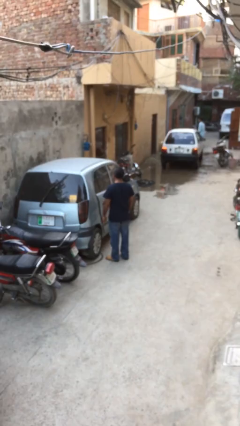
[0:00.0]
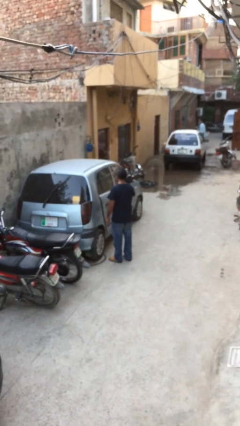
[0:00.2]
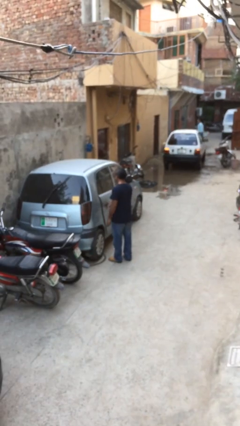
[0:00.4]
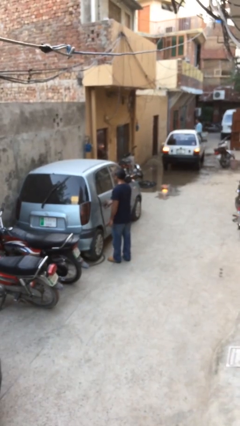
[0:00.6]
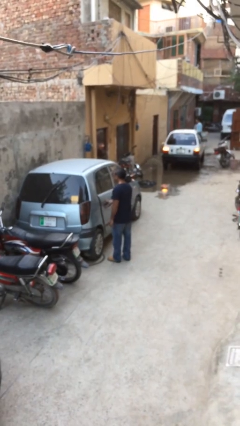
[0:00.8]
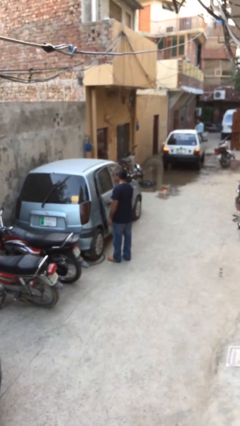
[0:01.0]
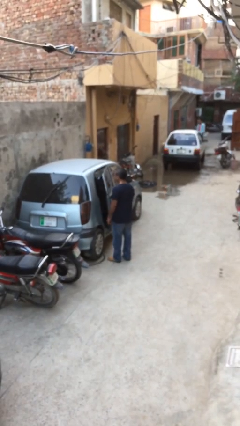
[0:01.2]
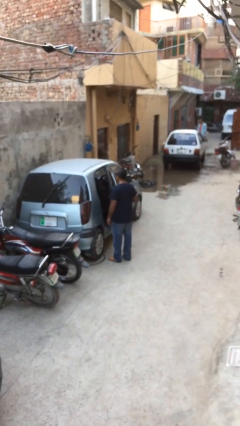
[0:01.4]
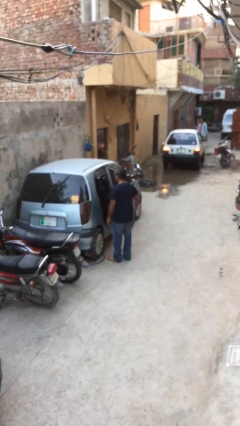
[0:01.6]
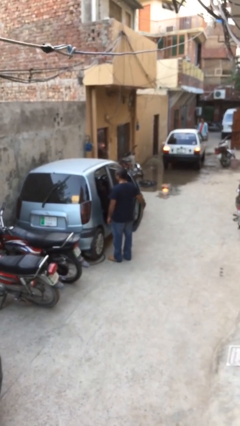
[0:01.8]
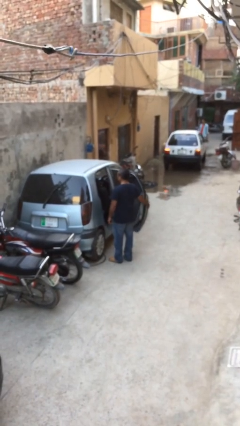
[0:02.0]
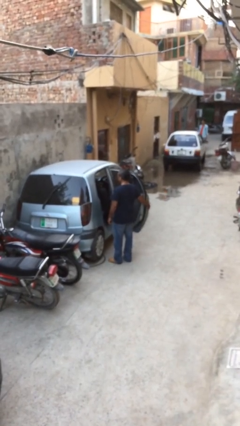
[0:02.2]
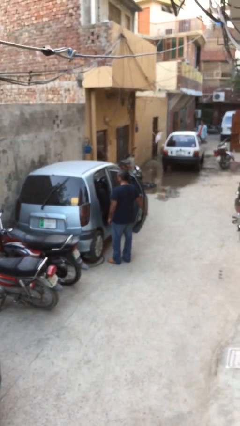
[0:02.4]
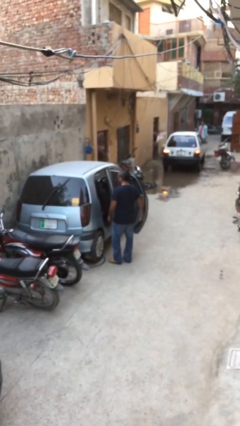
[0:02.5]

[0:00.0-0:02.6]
person opens car door

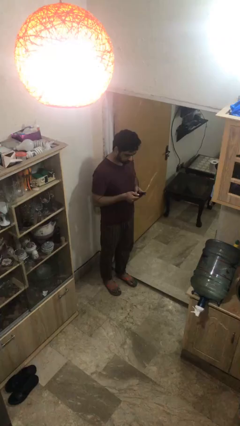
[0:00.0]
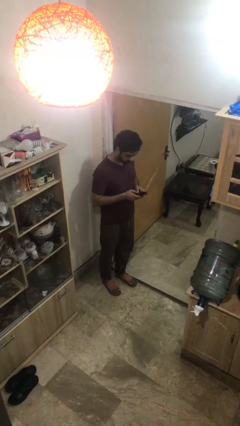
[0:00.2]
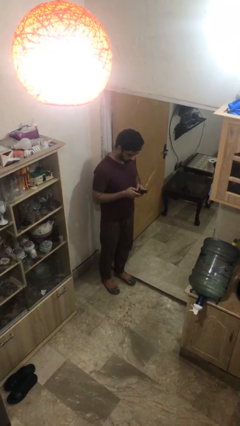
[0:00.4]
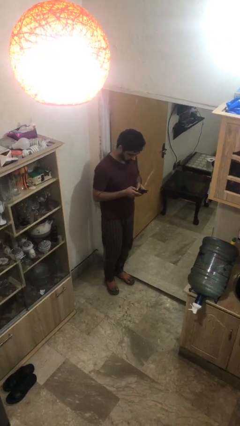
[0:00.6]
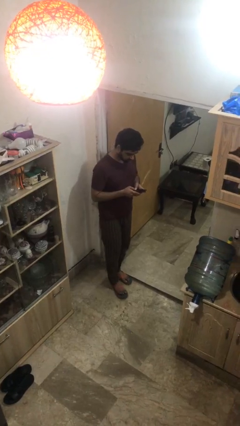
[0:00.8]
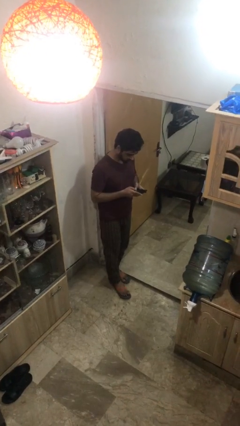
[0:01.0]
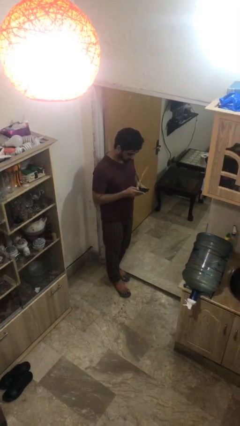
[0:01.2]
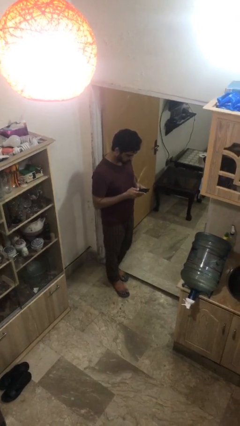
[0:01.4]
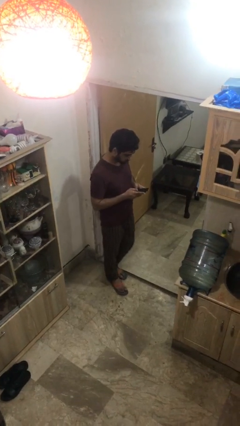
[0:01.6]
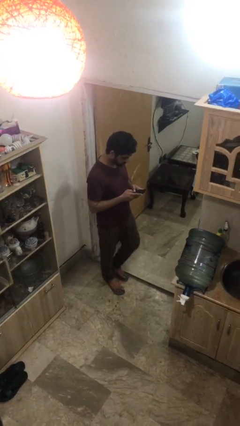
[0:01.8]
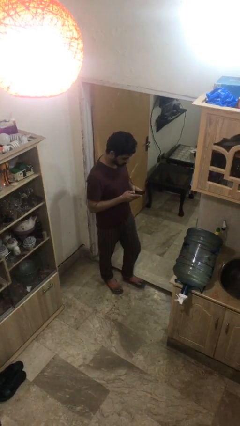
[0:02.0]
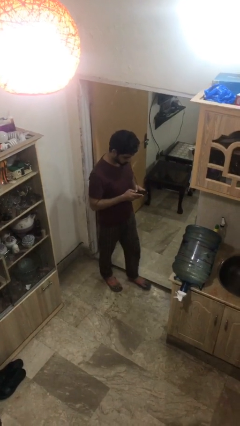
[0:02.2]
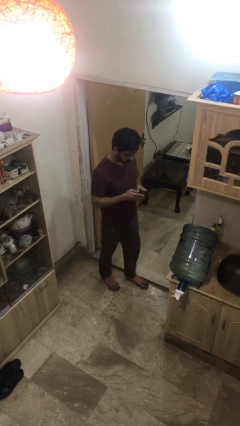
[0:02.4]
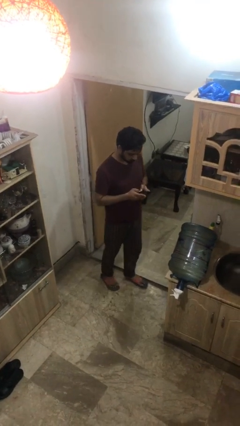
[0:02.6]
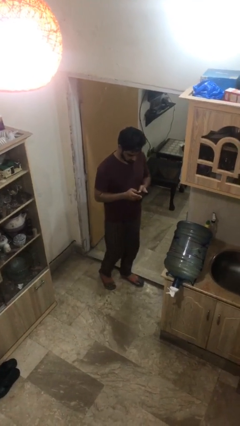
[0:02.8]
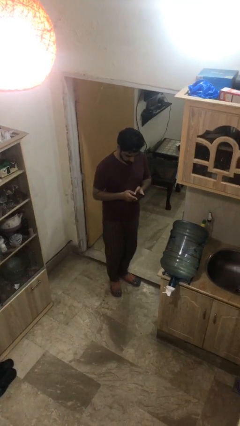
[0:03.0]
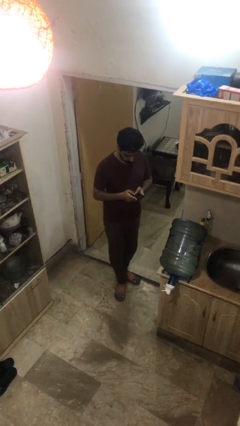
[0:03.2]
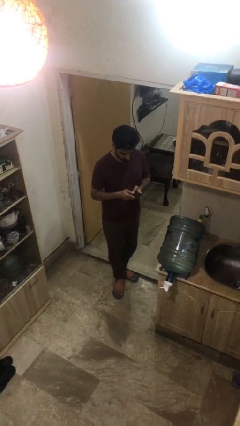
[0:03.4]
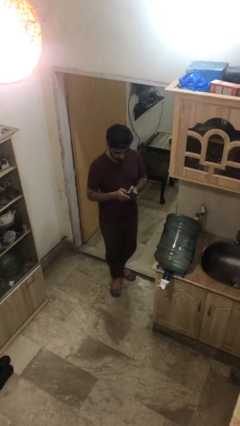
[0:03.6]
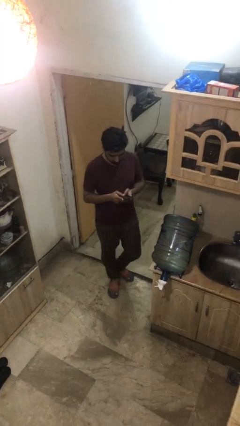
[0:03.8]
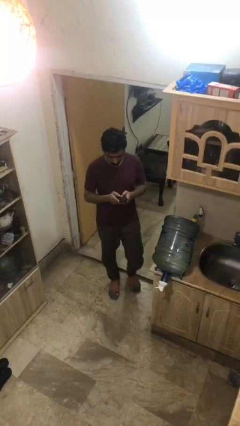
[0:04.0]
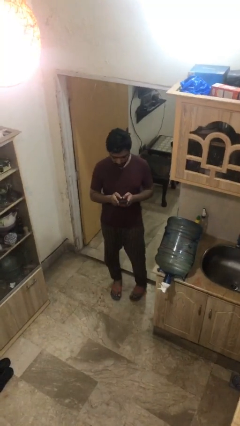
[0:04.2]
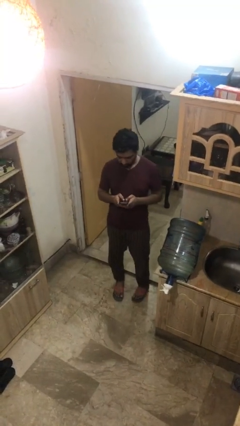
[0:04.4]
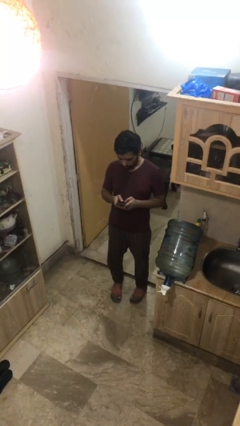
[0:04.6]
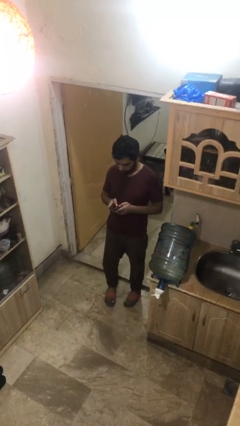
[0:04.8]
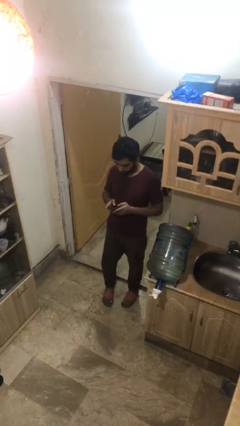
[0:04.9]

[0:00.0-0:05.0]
person texts on phone

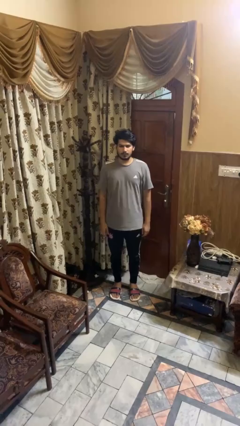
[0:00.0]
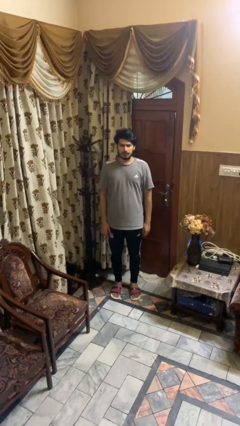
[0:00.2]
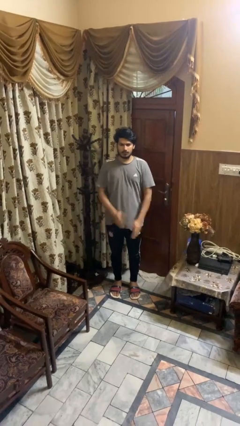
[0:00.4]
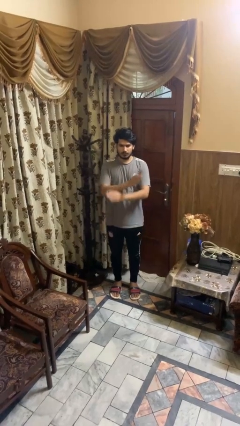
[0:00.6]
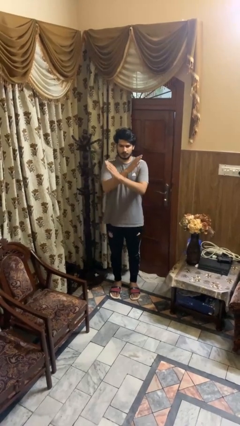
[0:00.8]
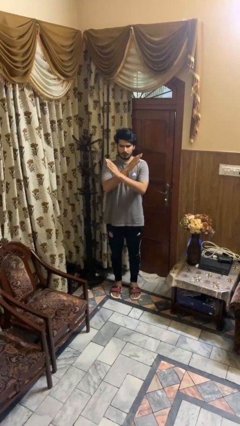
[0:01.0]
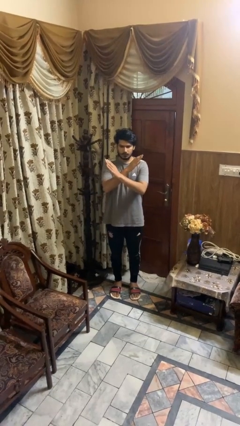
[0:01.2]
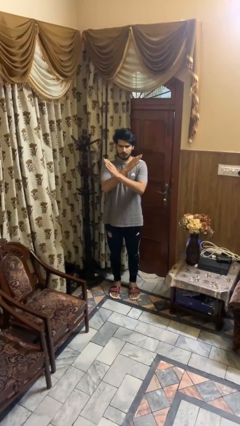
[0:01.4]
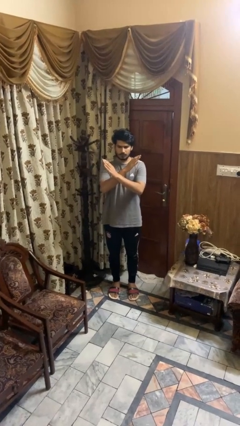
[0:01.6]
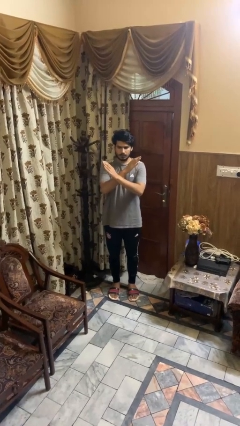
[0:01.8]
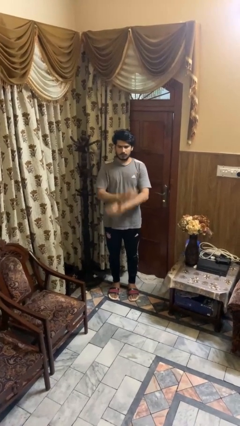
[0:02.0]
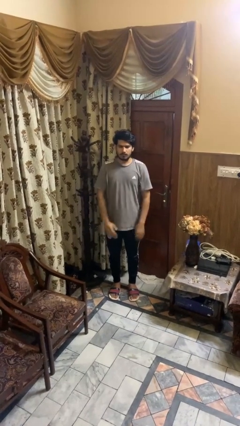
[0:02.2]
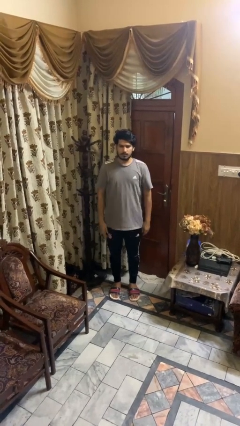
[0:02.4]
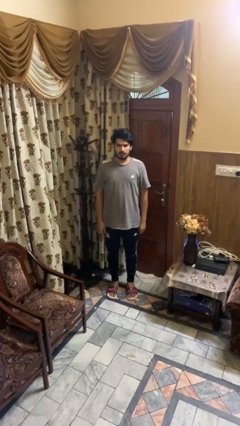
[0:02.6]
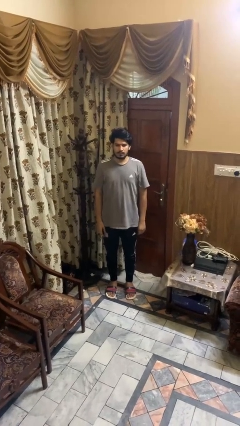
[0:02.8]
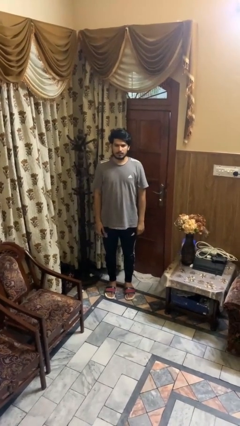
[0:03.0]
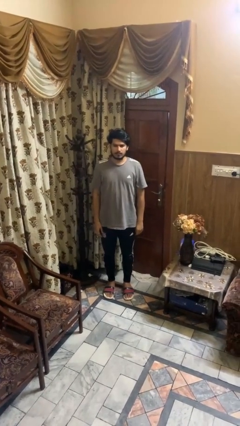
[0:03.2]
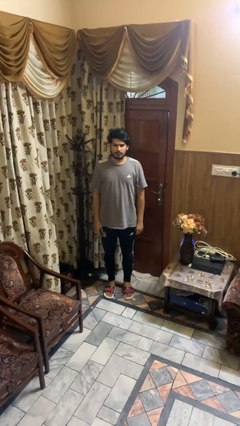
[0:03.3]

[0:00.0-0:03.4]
person gestures arms x

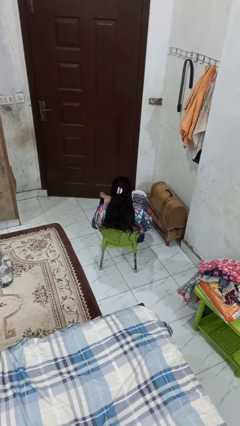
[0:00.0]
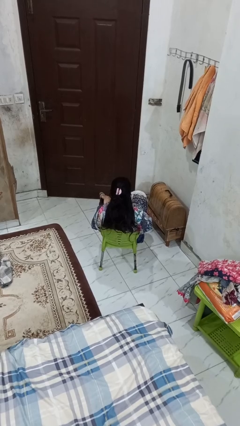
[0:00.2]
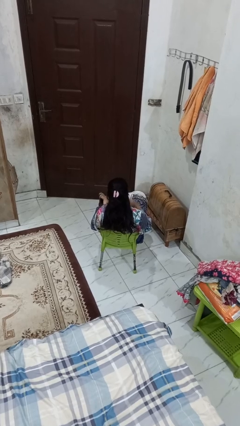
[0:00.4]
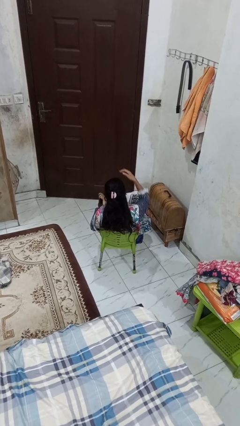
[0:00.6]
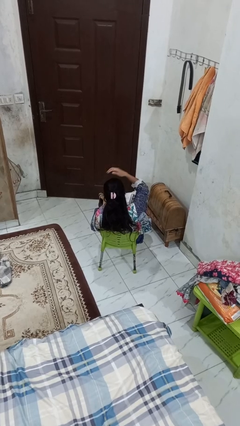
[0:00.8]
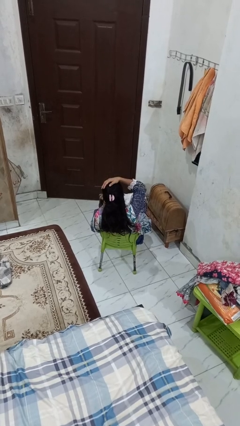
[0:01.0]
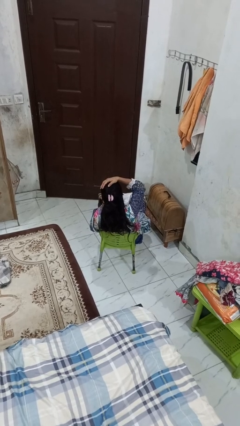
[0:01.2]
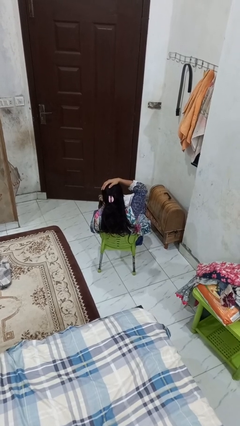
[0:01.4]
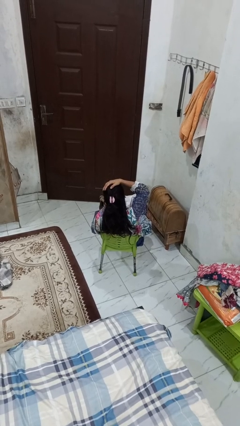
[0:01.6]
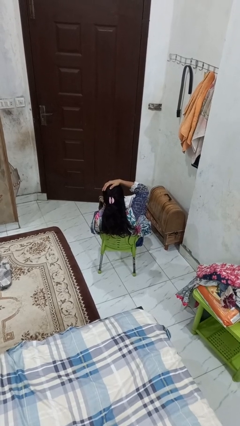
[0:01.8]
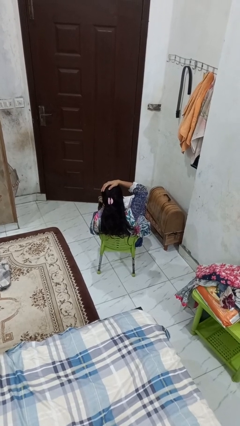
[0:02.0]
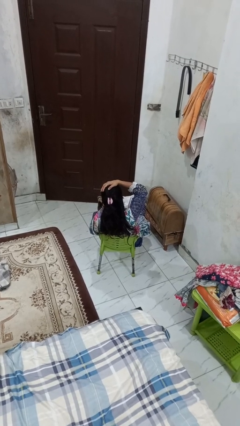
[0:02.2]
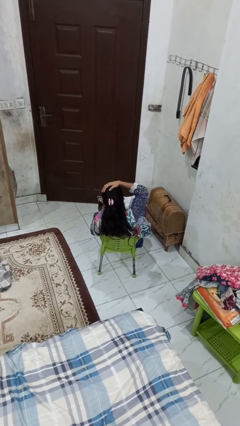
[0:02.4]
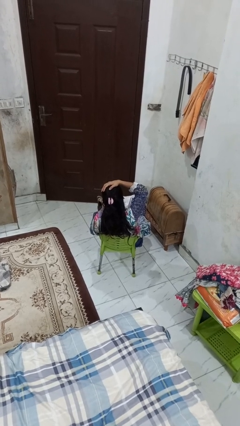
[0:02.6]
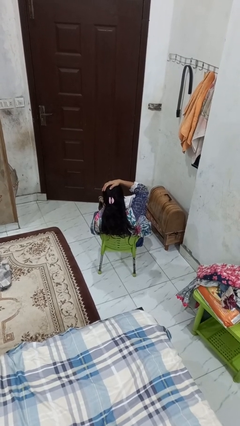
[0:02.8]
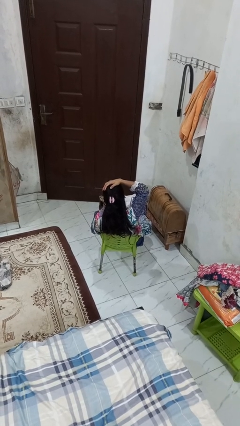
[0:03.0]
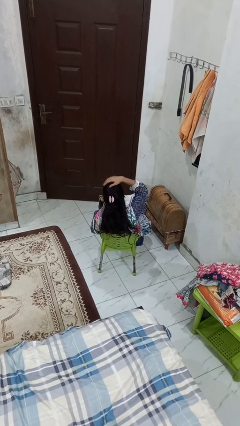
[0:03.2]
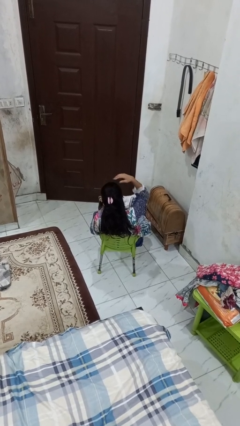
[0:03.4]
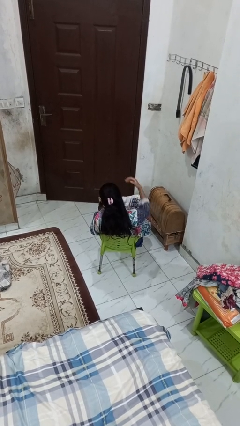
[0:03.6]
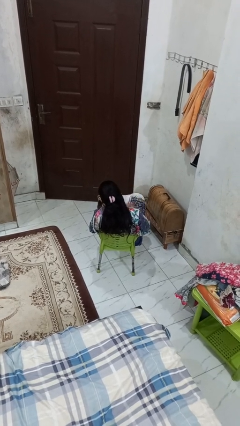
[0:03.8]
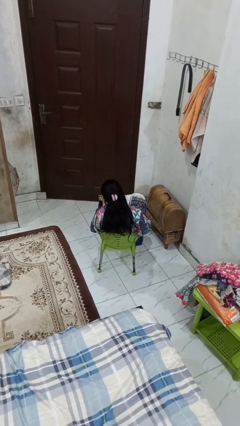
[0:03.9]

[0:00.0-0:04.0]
person pats head

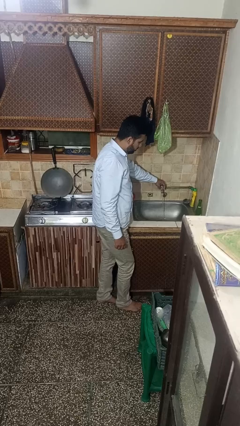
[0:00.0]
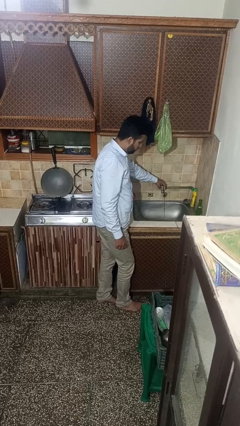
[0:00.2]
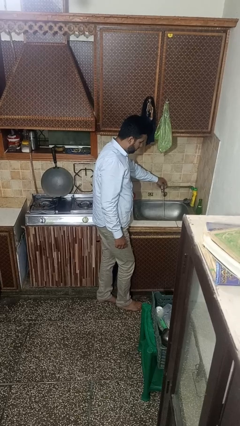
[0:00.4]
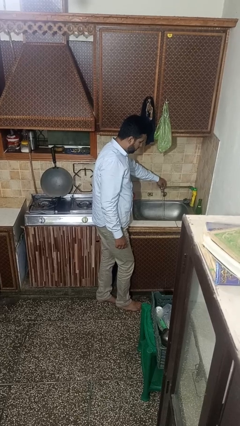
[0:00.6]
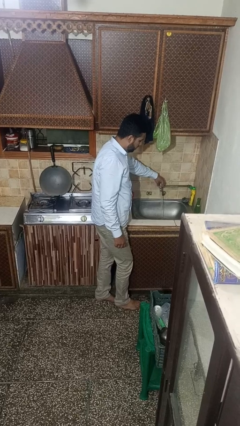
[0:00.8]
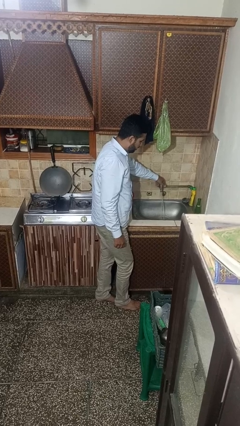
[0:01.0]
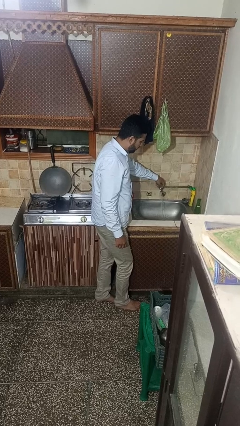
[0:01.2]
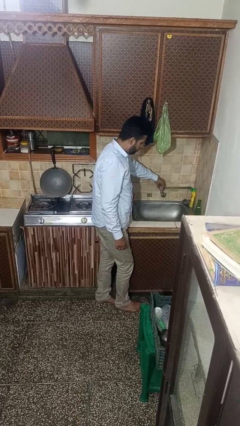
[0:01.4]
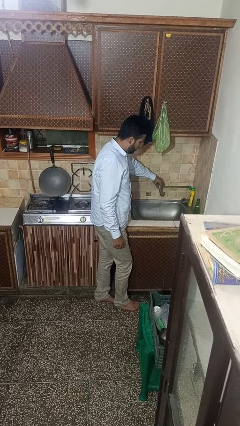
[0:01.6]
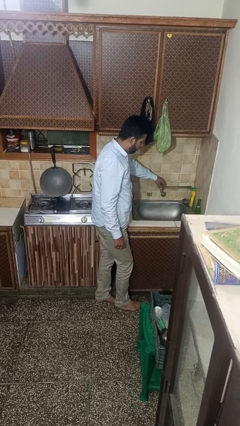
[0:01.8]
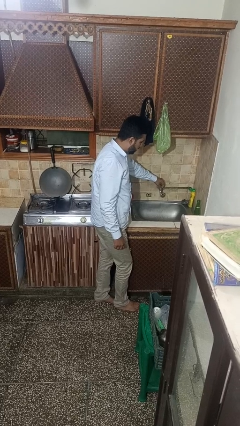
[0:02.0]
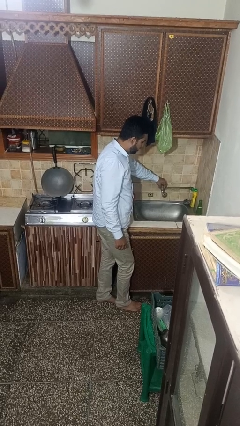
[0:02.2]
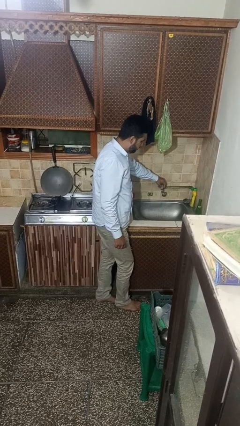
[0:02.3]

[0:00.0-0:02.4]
person turns off faucet
